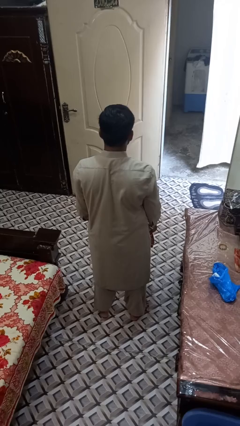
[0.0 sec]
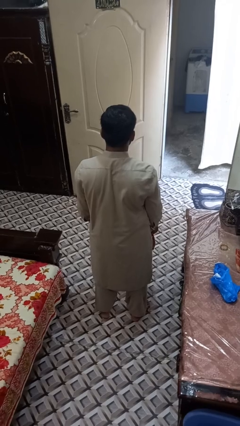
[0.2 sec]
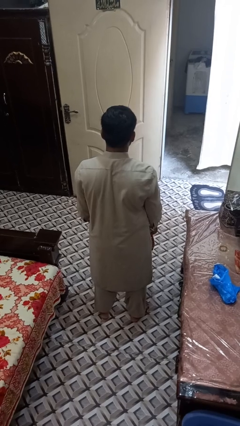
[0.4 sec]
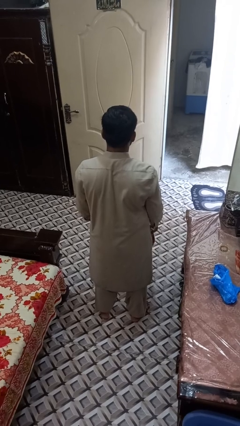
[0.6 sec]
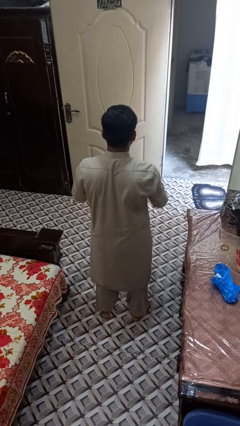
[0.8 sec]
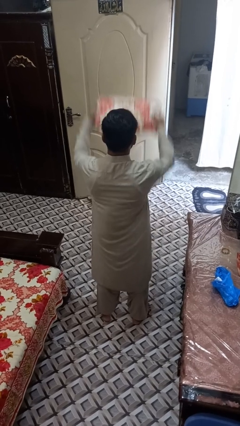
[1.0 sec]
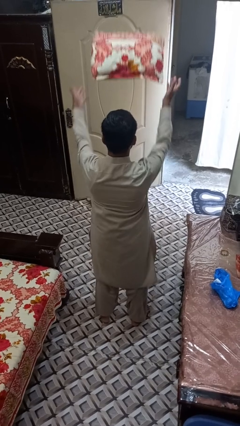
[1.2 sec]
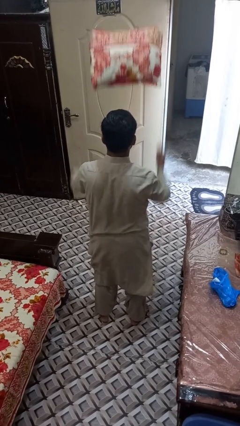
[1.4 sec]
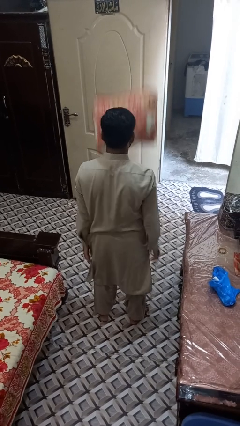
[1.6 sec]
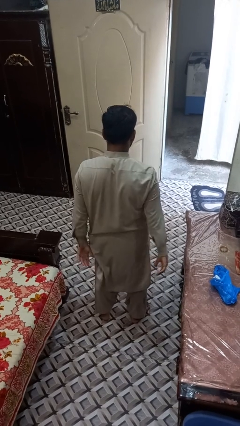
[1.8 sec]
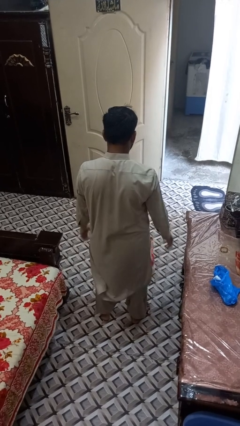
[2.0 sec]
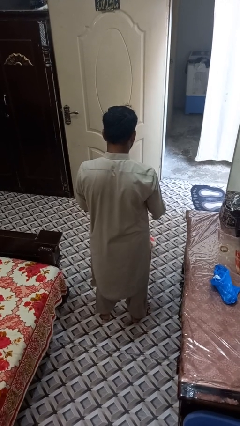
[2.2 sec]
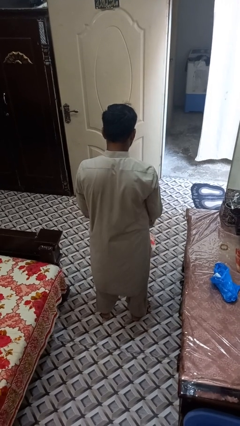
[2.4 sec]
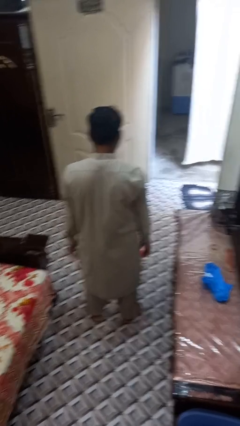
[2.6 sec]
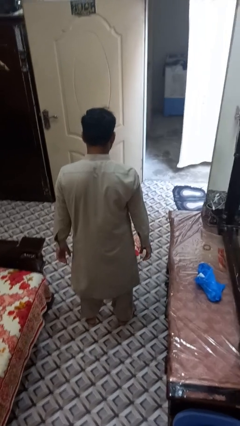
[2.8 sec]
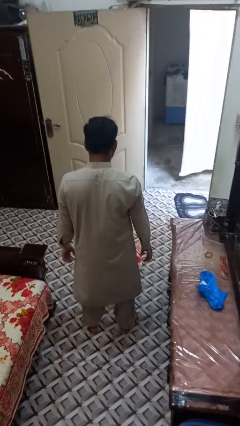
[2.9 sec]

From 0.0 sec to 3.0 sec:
person throws object into air

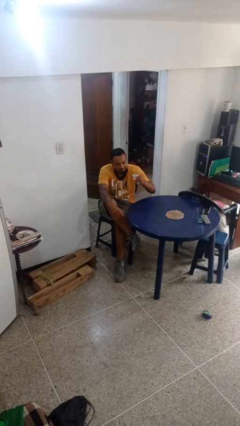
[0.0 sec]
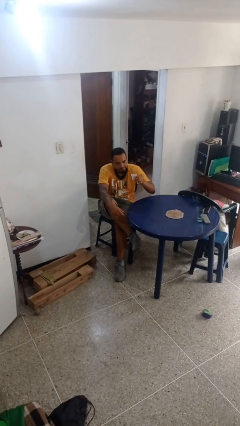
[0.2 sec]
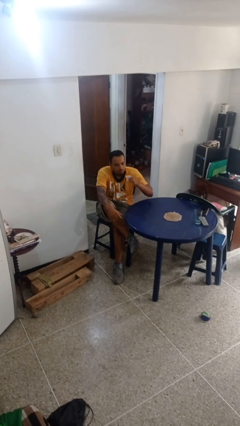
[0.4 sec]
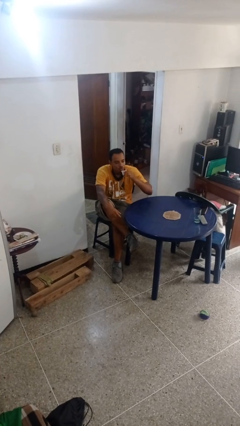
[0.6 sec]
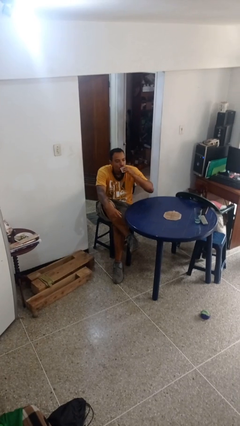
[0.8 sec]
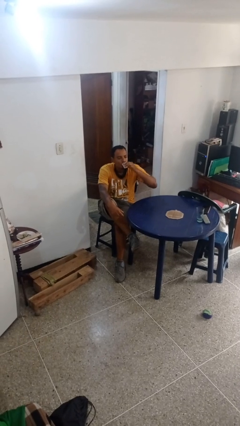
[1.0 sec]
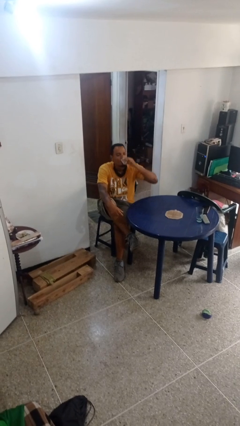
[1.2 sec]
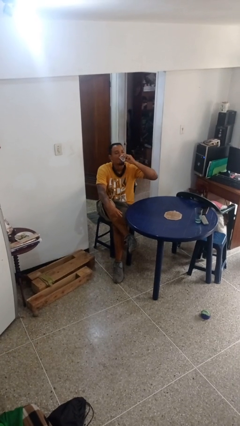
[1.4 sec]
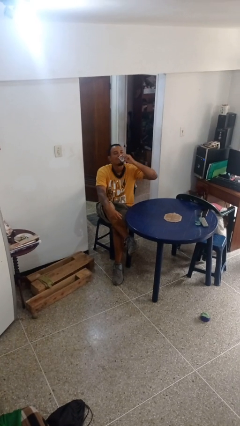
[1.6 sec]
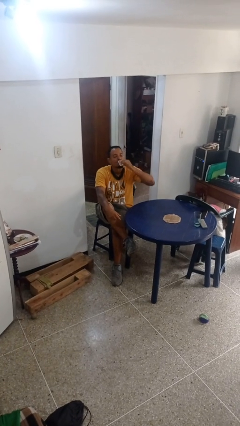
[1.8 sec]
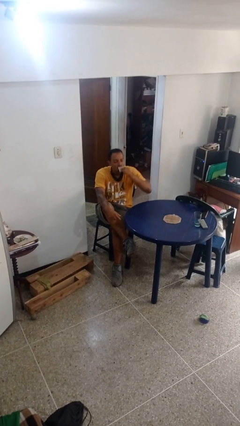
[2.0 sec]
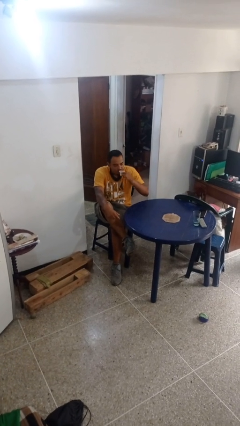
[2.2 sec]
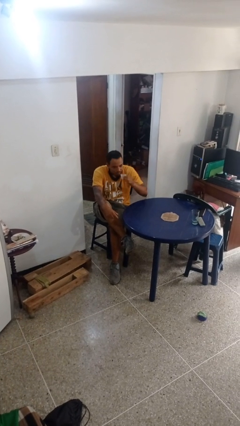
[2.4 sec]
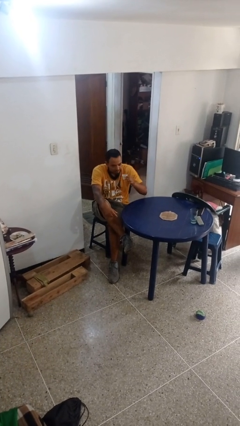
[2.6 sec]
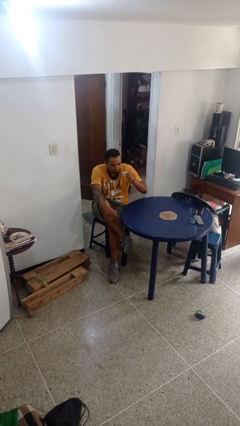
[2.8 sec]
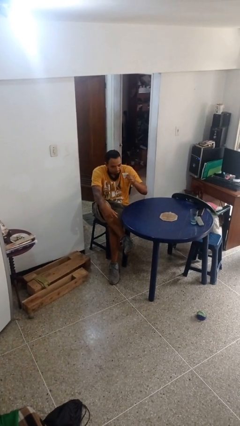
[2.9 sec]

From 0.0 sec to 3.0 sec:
person drinks from shotglass

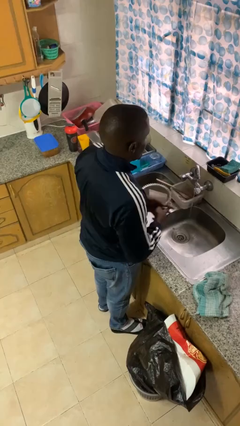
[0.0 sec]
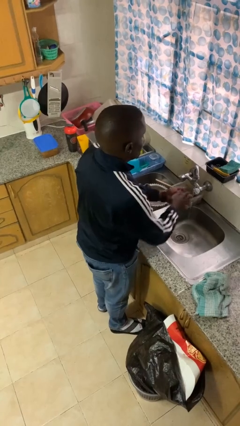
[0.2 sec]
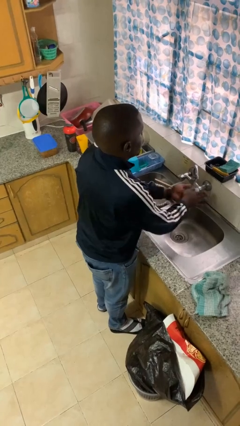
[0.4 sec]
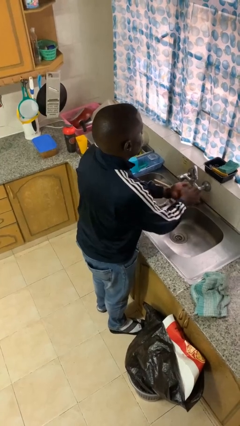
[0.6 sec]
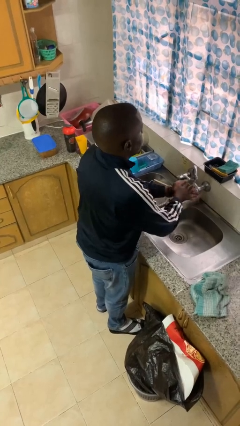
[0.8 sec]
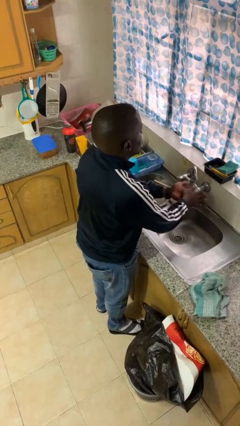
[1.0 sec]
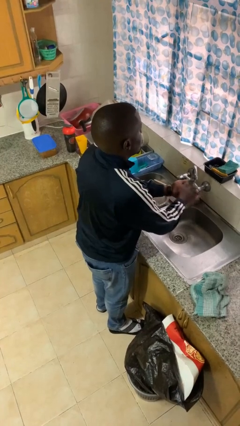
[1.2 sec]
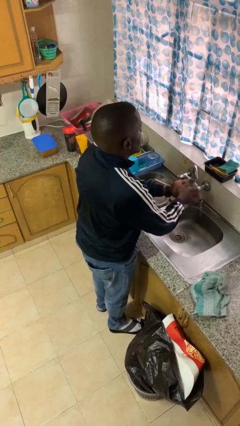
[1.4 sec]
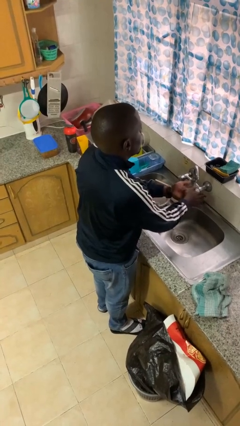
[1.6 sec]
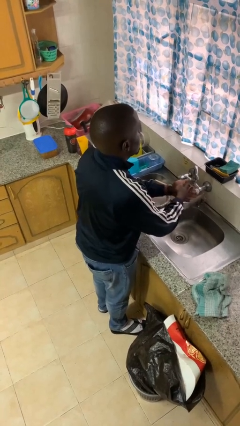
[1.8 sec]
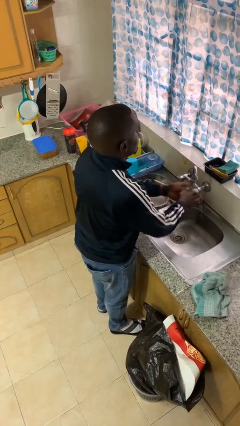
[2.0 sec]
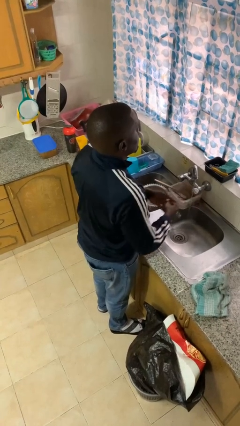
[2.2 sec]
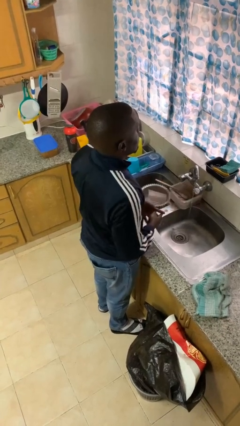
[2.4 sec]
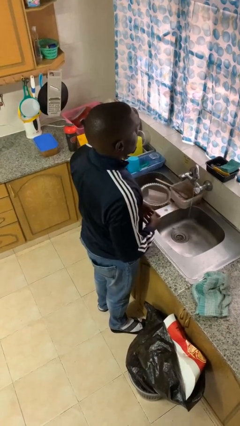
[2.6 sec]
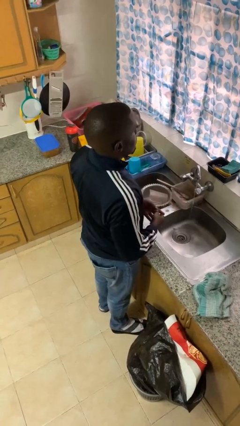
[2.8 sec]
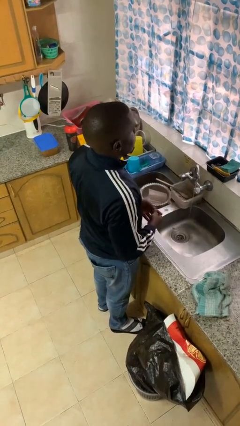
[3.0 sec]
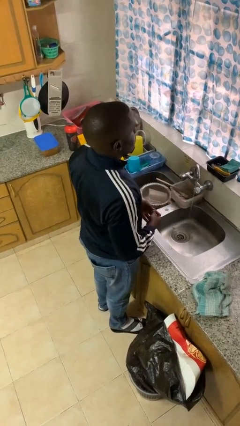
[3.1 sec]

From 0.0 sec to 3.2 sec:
person washes hands

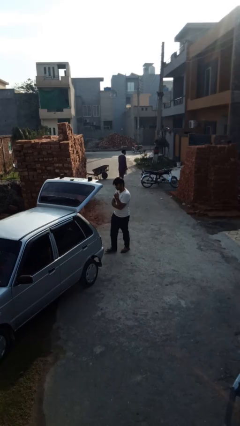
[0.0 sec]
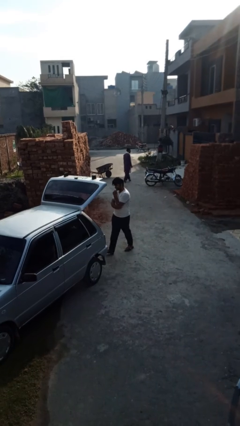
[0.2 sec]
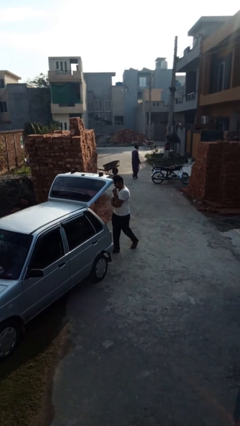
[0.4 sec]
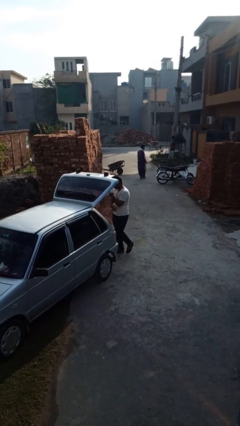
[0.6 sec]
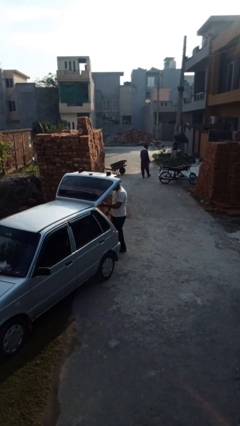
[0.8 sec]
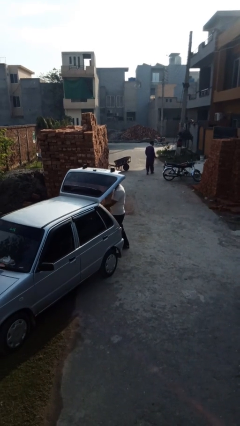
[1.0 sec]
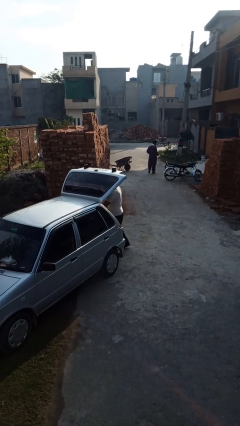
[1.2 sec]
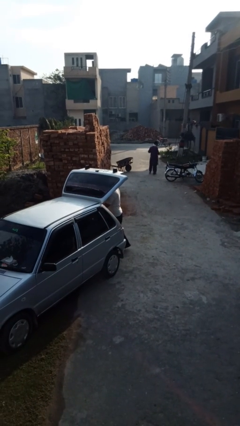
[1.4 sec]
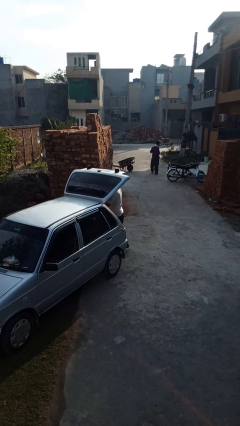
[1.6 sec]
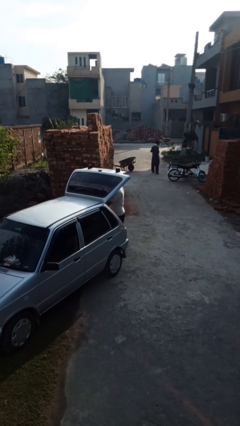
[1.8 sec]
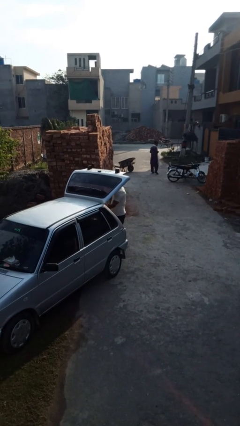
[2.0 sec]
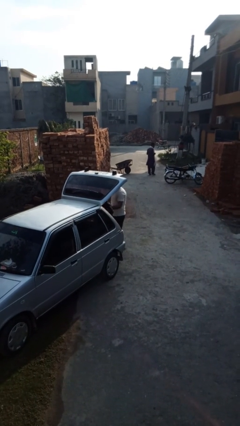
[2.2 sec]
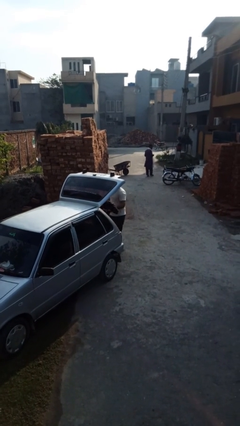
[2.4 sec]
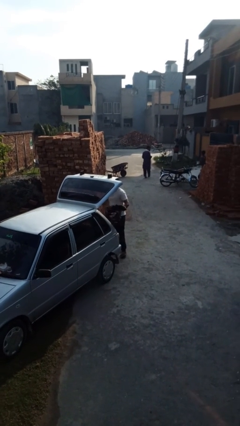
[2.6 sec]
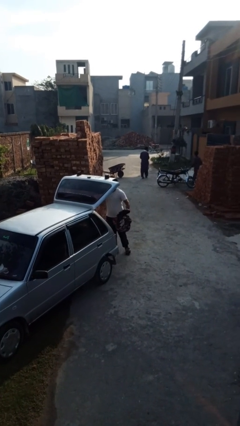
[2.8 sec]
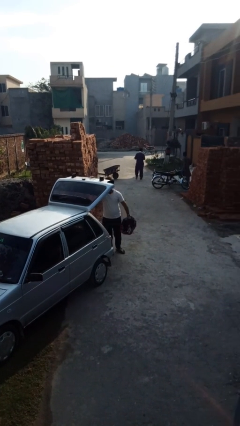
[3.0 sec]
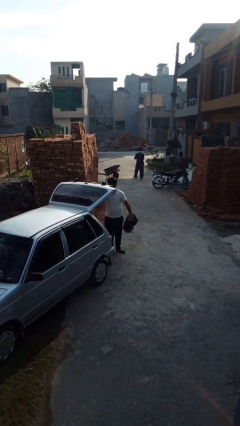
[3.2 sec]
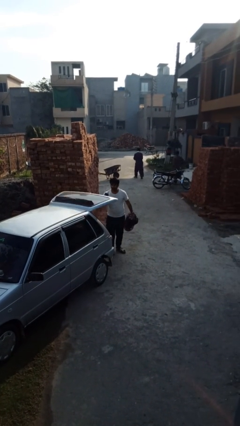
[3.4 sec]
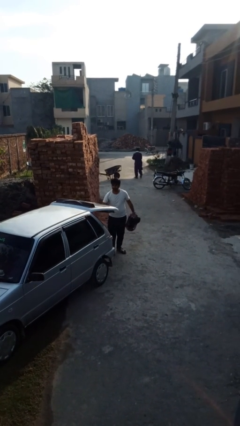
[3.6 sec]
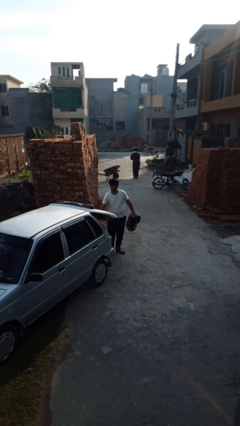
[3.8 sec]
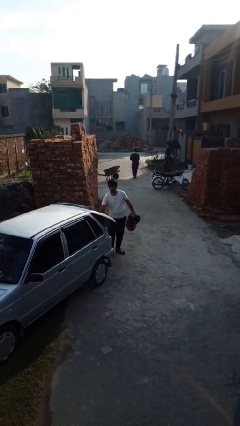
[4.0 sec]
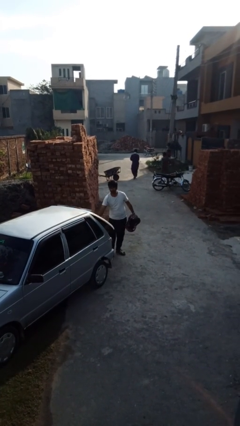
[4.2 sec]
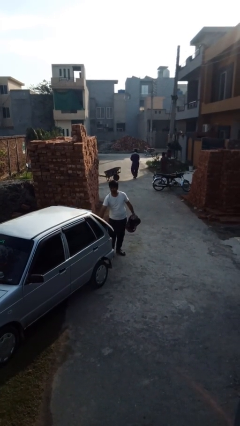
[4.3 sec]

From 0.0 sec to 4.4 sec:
person unloads car

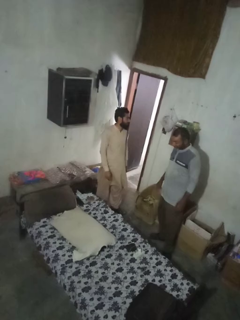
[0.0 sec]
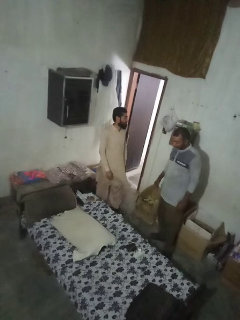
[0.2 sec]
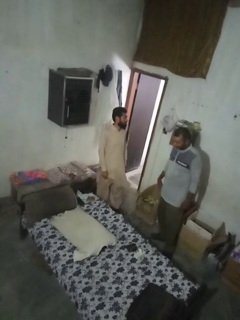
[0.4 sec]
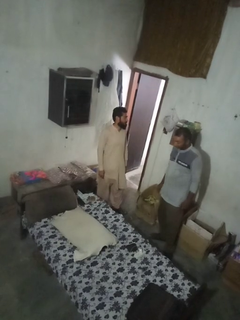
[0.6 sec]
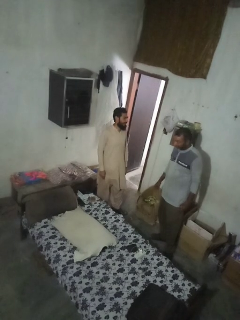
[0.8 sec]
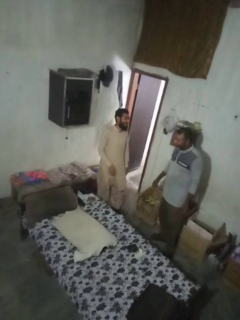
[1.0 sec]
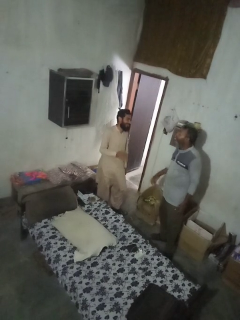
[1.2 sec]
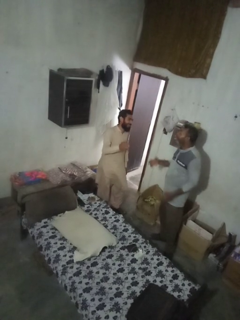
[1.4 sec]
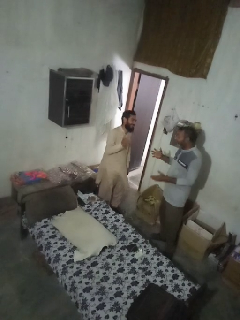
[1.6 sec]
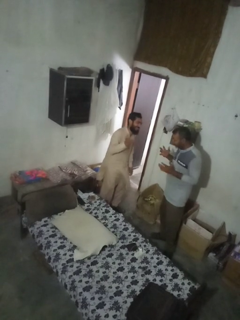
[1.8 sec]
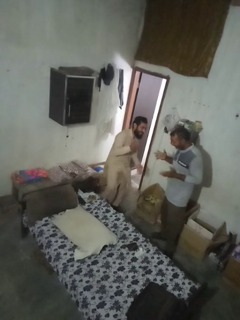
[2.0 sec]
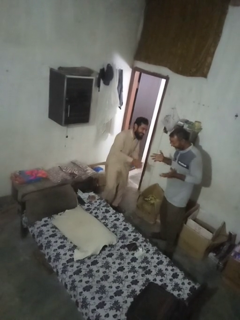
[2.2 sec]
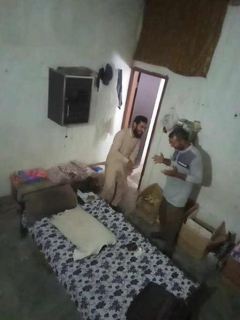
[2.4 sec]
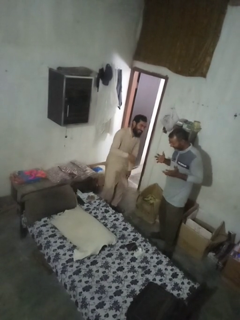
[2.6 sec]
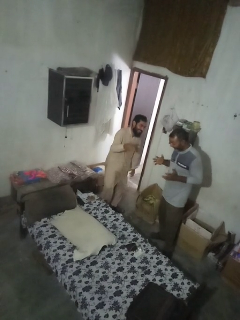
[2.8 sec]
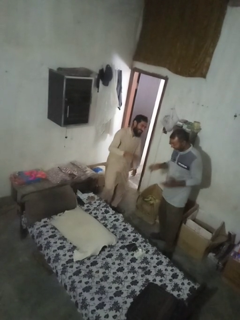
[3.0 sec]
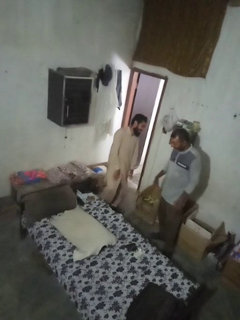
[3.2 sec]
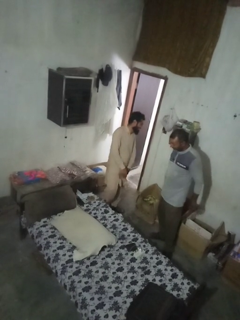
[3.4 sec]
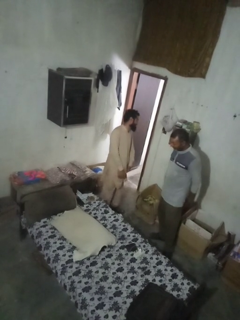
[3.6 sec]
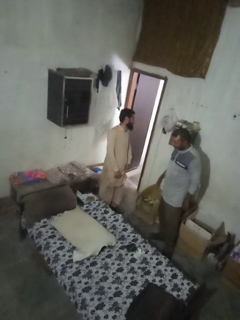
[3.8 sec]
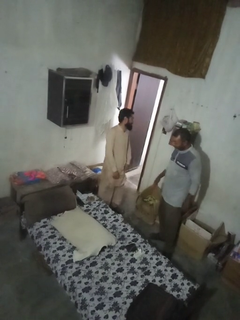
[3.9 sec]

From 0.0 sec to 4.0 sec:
person laughs with person

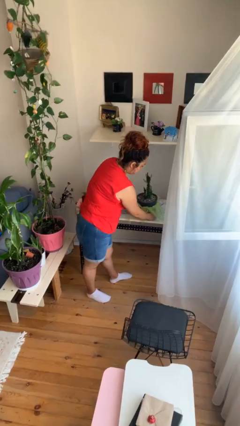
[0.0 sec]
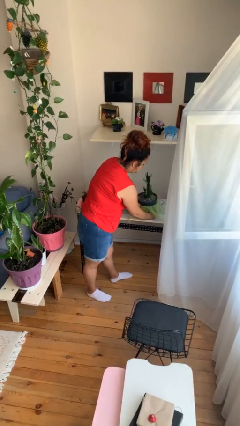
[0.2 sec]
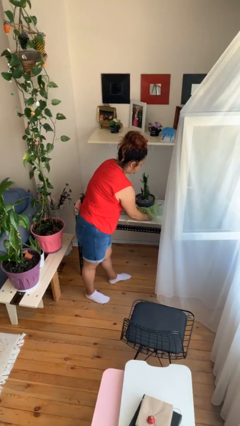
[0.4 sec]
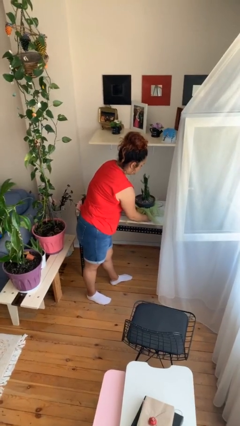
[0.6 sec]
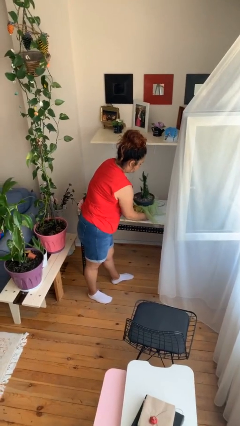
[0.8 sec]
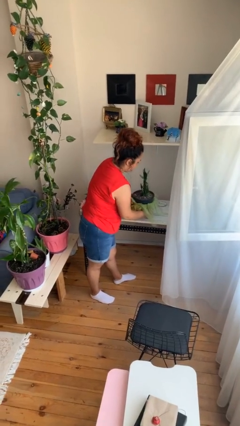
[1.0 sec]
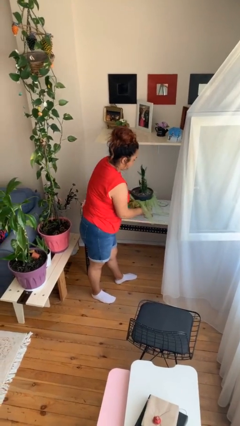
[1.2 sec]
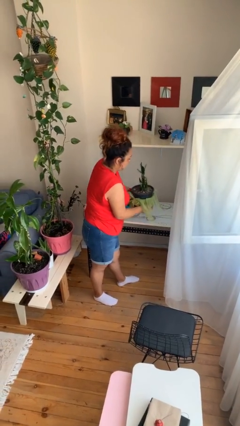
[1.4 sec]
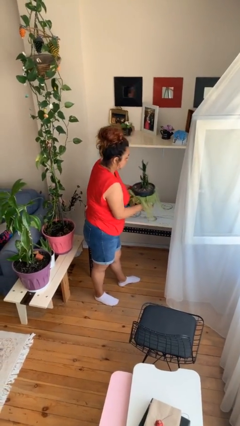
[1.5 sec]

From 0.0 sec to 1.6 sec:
person picks up object from table
